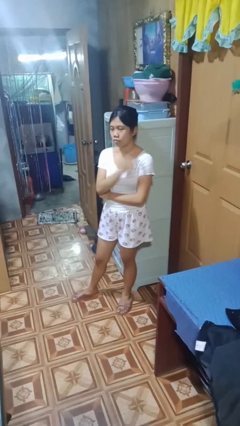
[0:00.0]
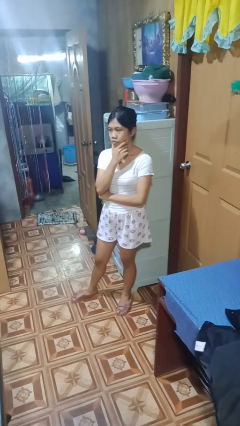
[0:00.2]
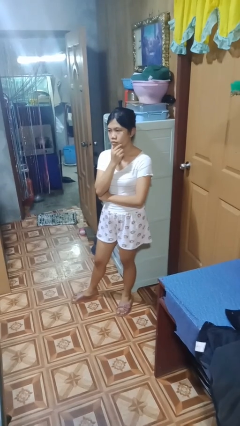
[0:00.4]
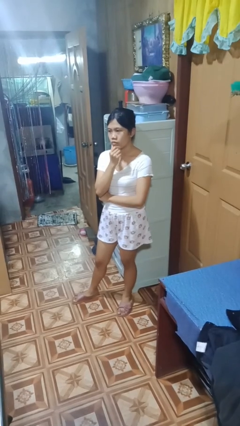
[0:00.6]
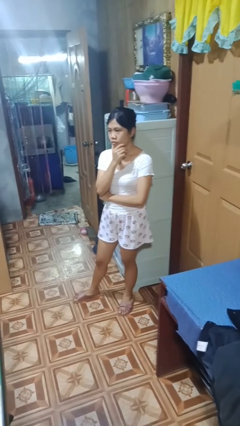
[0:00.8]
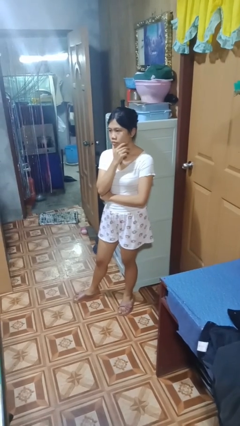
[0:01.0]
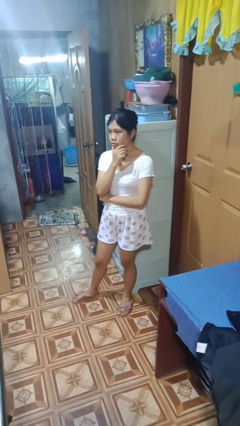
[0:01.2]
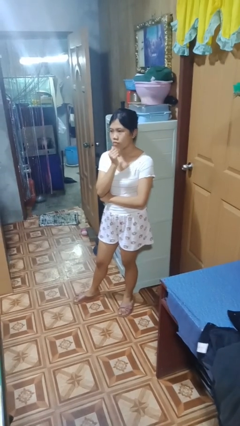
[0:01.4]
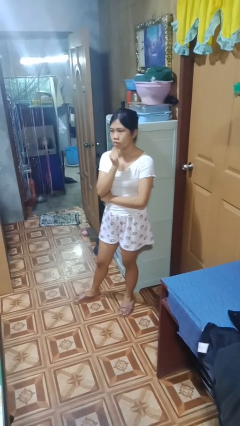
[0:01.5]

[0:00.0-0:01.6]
person strokes chin

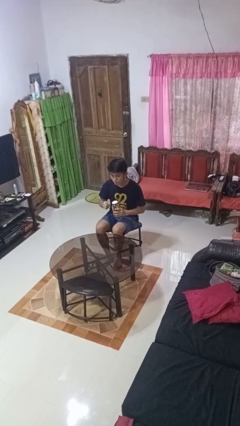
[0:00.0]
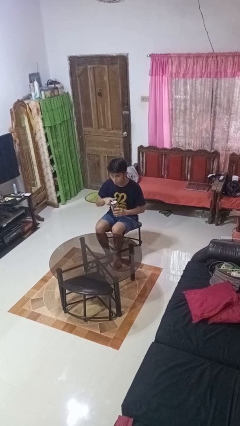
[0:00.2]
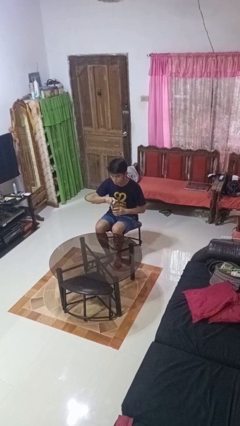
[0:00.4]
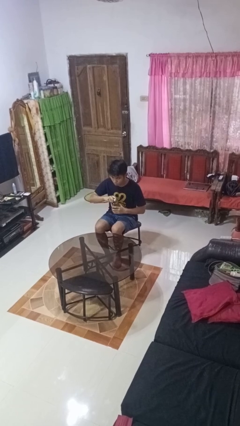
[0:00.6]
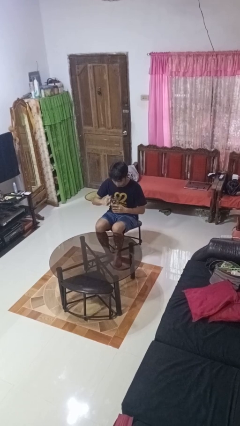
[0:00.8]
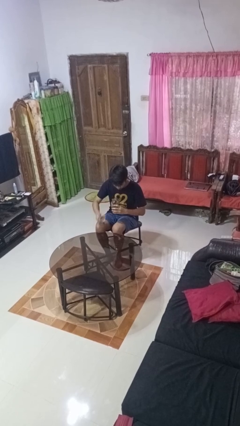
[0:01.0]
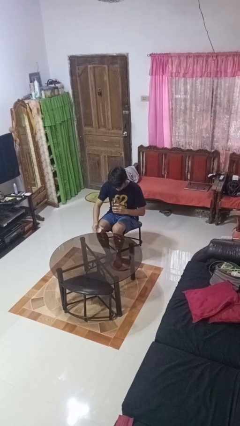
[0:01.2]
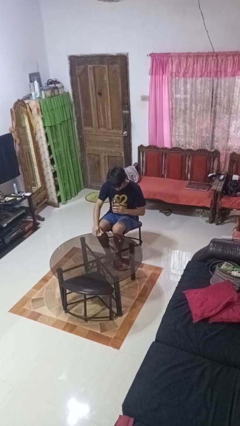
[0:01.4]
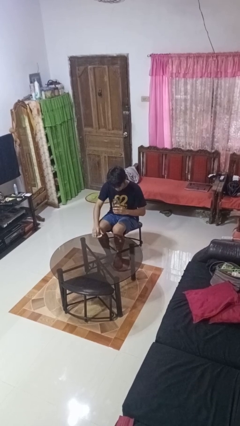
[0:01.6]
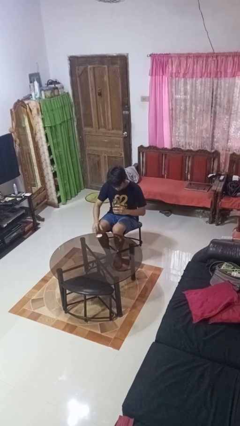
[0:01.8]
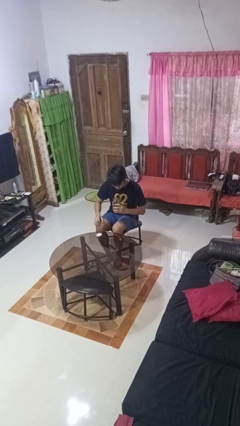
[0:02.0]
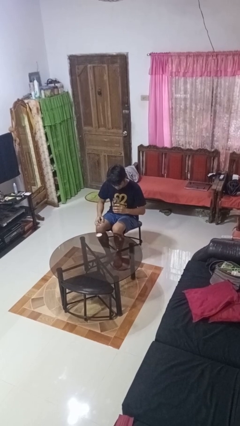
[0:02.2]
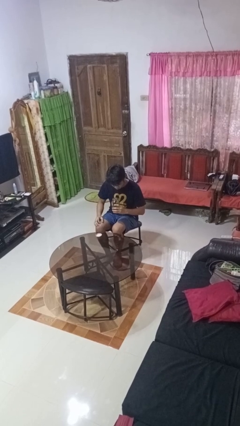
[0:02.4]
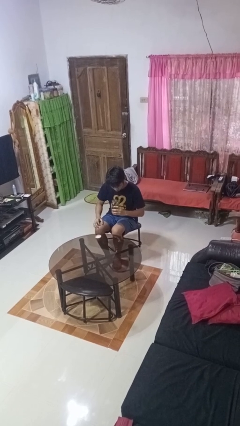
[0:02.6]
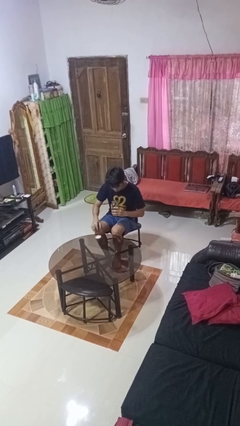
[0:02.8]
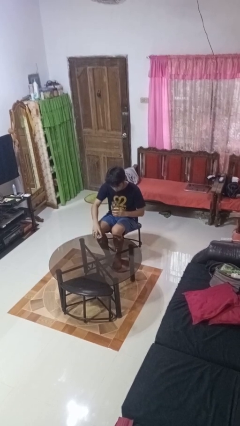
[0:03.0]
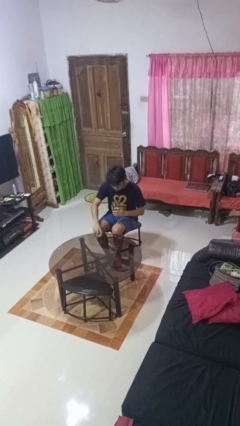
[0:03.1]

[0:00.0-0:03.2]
person opens jar

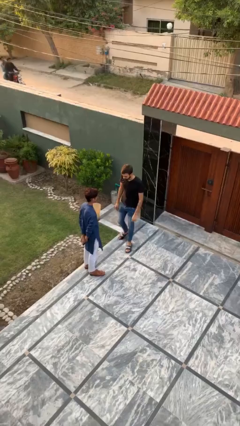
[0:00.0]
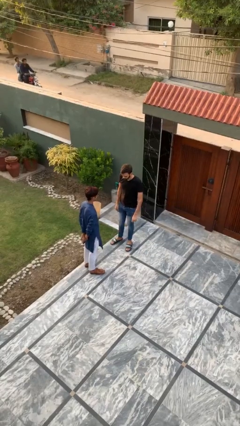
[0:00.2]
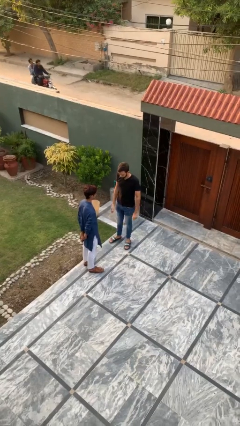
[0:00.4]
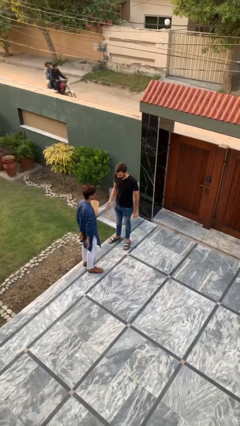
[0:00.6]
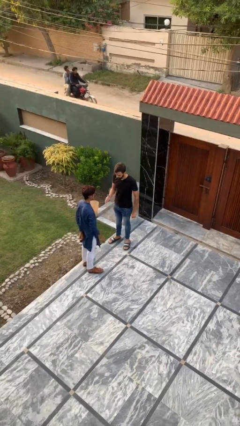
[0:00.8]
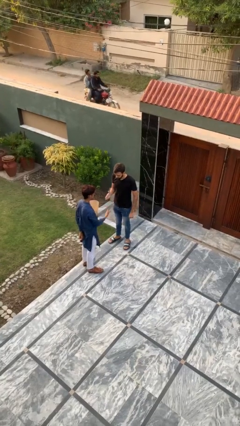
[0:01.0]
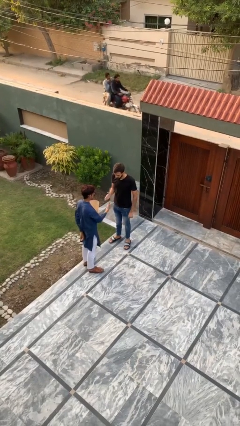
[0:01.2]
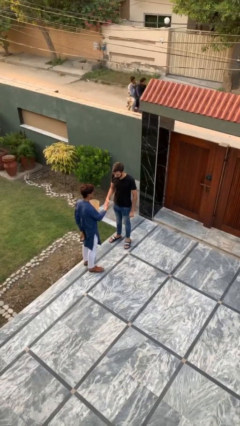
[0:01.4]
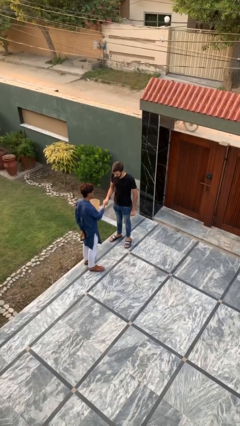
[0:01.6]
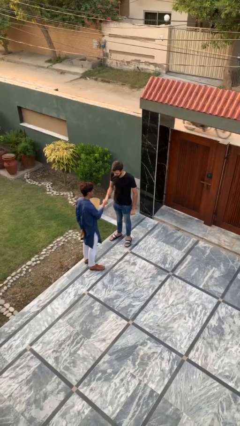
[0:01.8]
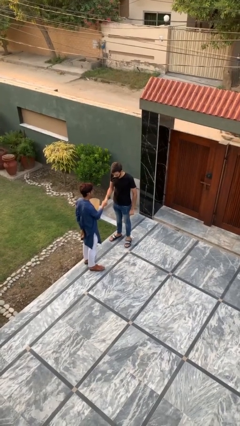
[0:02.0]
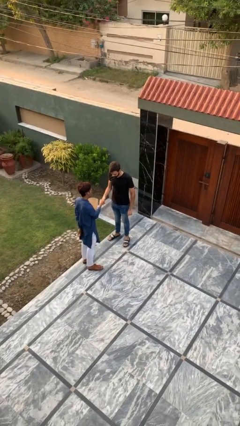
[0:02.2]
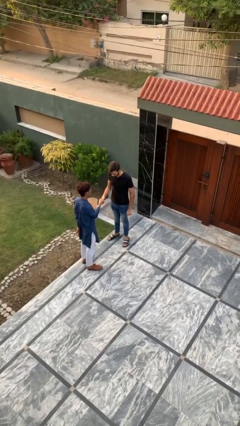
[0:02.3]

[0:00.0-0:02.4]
person shakes hand

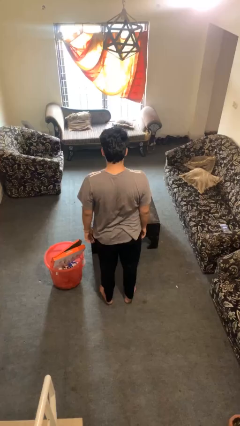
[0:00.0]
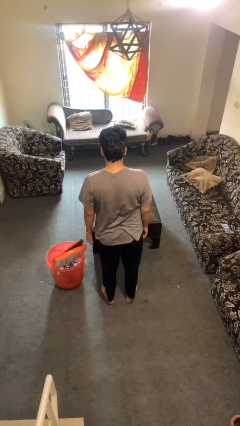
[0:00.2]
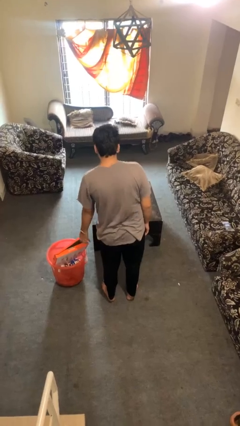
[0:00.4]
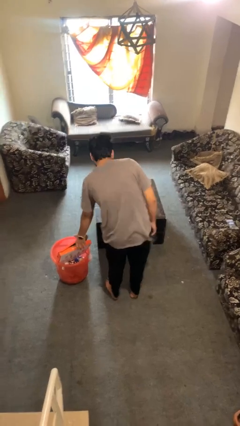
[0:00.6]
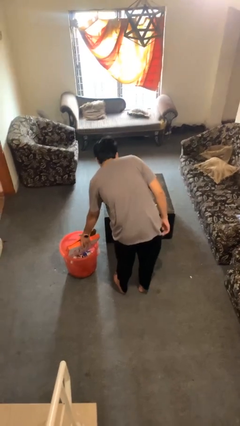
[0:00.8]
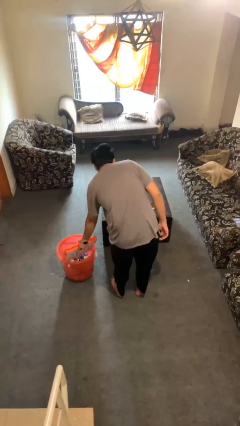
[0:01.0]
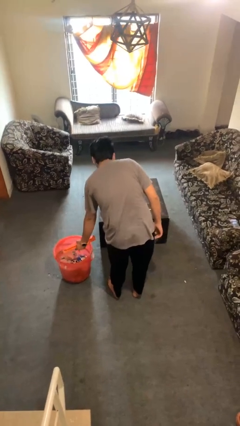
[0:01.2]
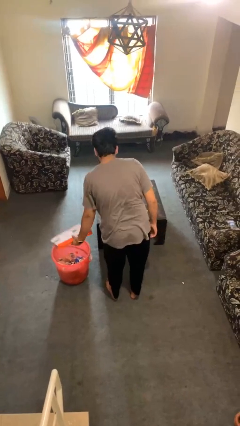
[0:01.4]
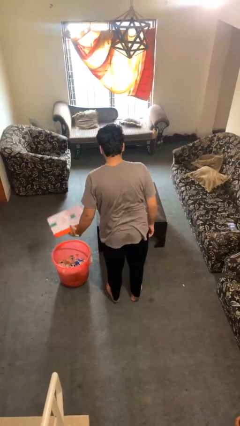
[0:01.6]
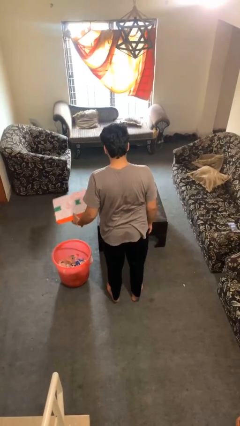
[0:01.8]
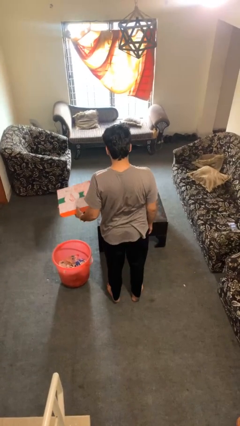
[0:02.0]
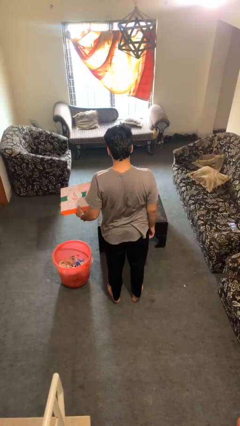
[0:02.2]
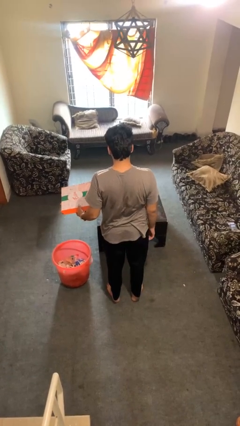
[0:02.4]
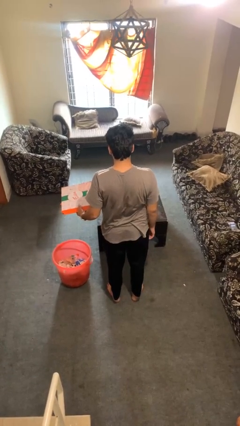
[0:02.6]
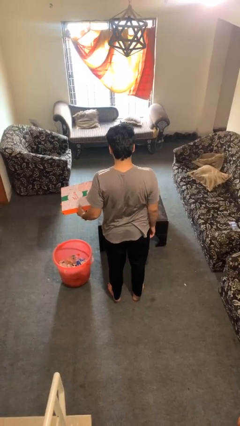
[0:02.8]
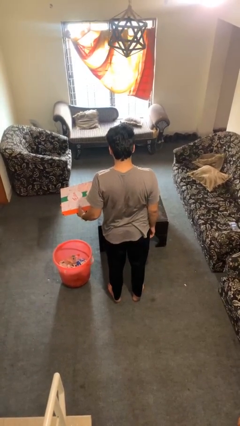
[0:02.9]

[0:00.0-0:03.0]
person takes object from basket

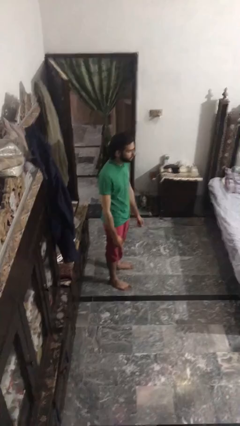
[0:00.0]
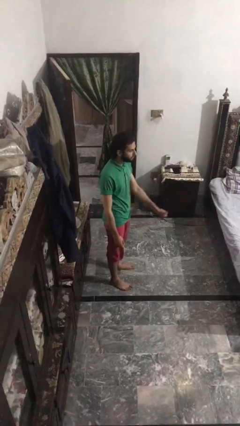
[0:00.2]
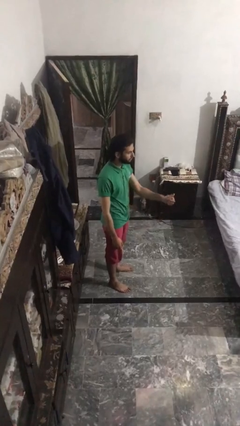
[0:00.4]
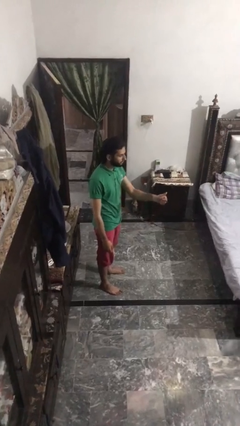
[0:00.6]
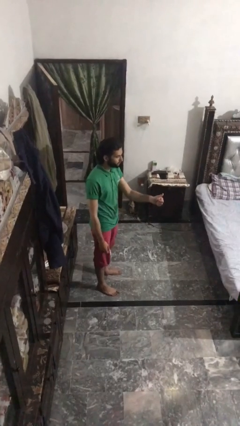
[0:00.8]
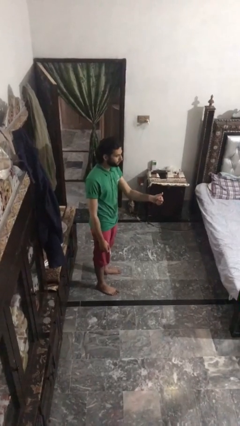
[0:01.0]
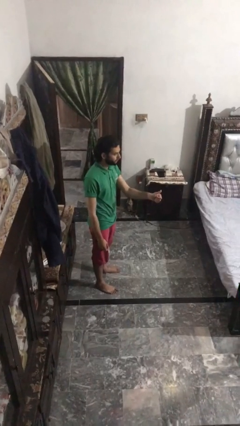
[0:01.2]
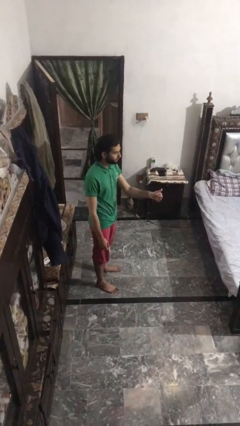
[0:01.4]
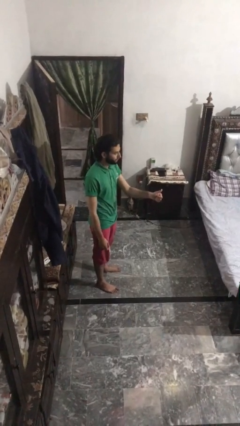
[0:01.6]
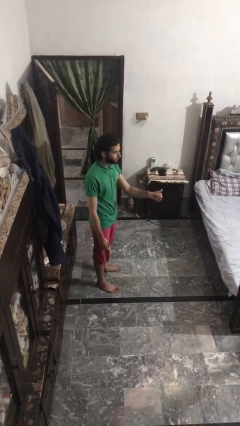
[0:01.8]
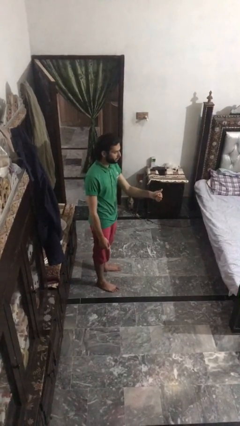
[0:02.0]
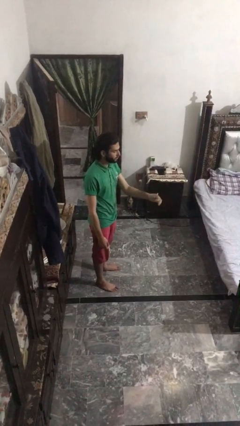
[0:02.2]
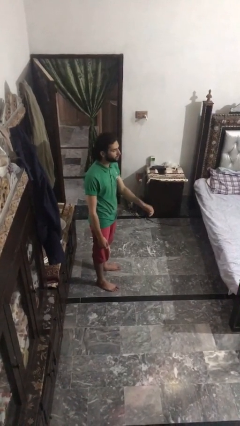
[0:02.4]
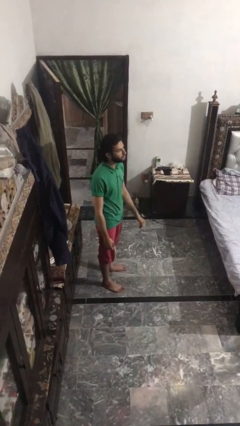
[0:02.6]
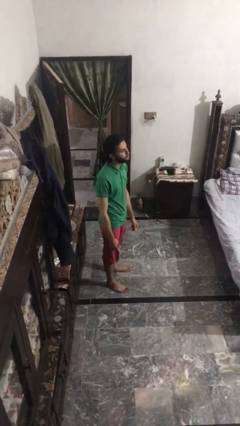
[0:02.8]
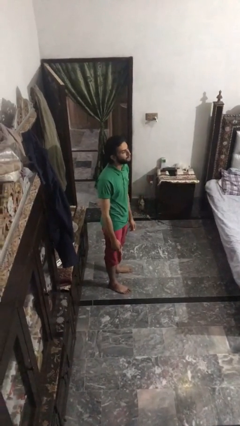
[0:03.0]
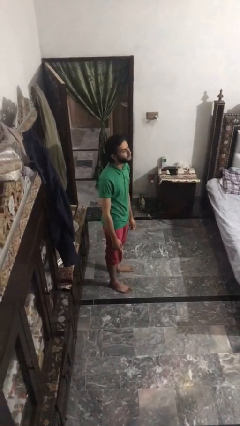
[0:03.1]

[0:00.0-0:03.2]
person gestures thumbs up

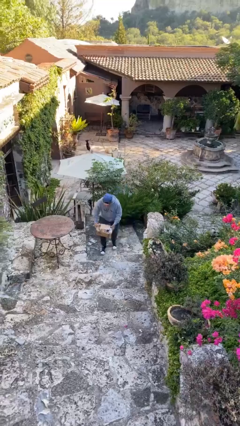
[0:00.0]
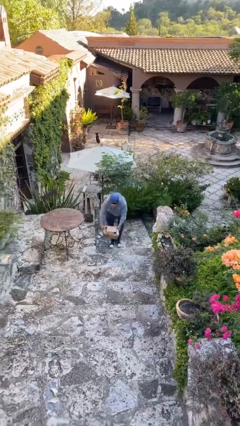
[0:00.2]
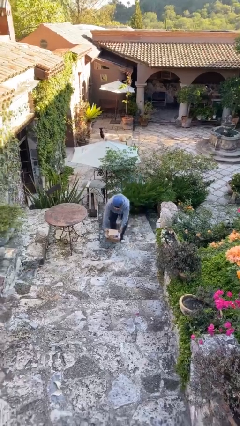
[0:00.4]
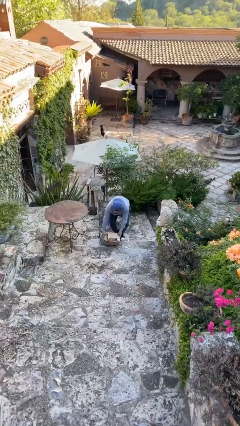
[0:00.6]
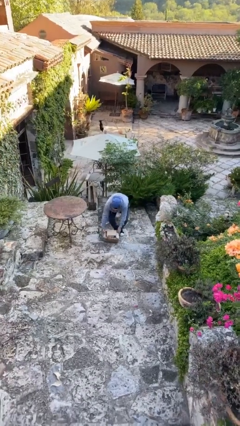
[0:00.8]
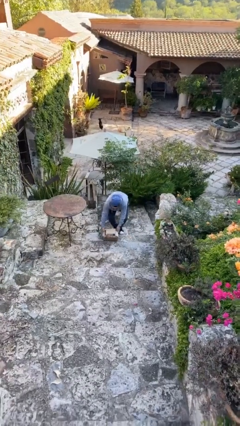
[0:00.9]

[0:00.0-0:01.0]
person puts down object on floor

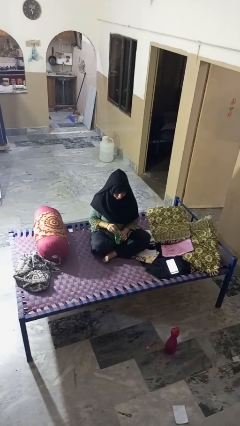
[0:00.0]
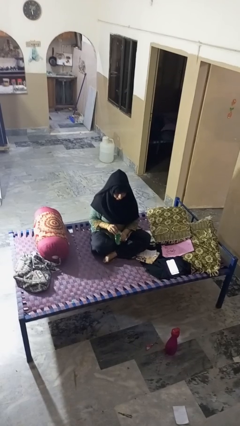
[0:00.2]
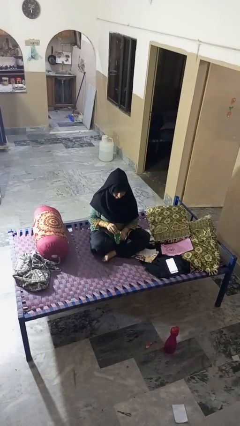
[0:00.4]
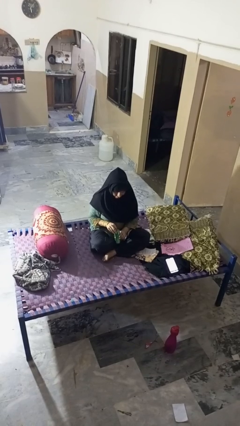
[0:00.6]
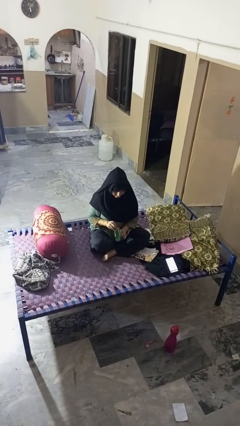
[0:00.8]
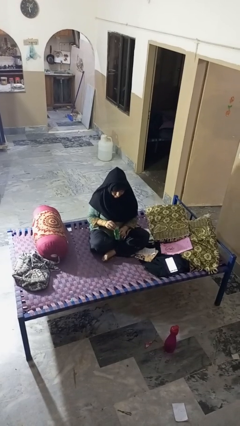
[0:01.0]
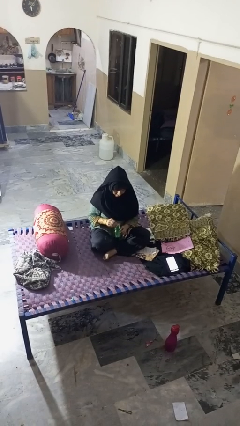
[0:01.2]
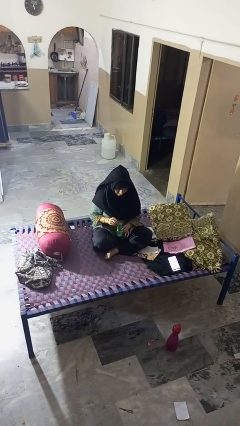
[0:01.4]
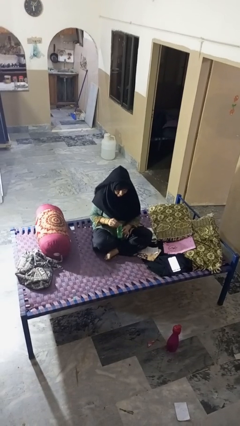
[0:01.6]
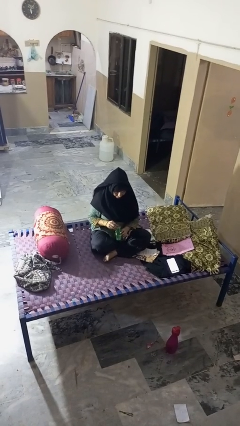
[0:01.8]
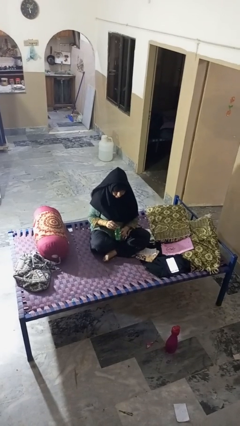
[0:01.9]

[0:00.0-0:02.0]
person opens can with can opener
